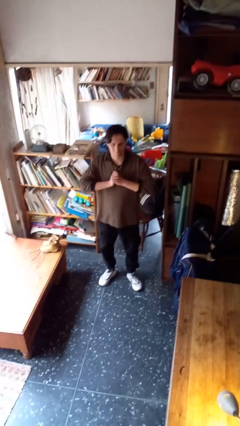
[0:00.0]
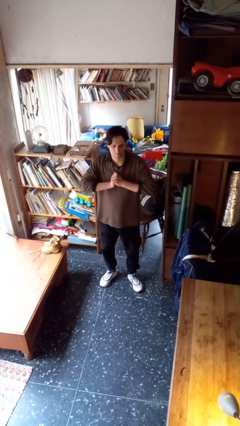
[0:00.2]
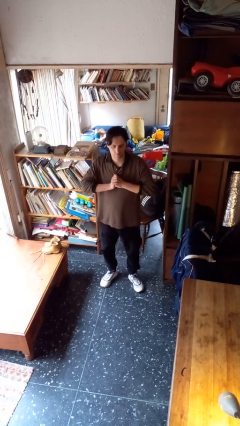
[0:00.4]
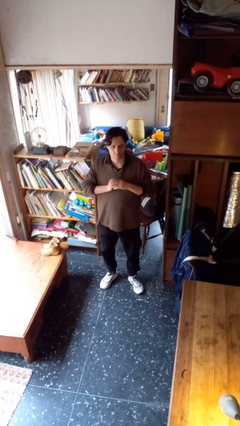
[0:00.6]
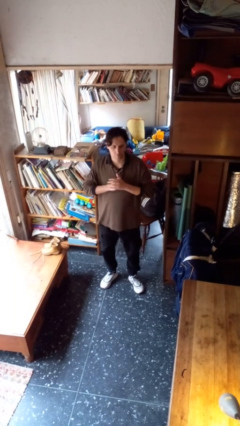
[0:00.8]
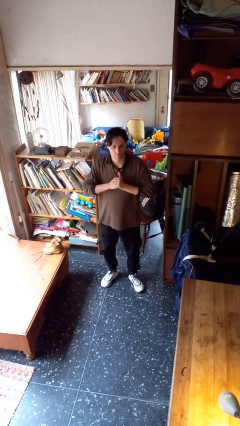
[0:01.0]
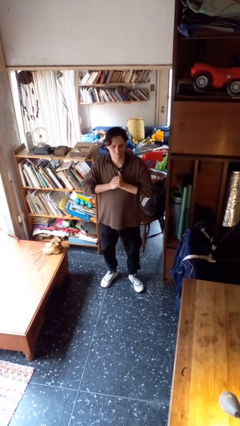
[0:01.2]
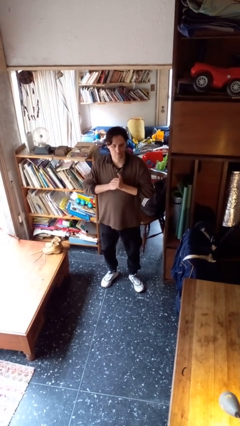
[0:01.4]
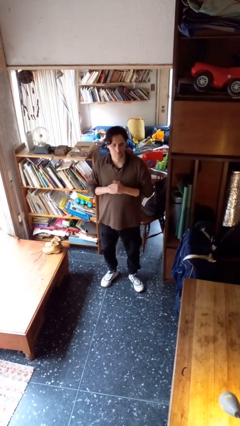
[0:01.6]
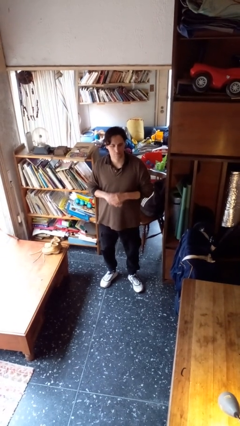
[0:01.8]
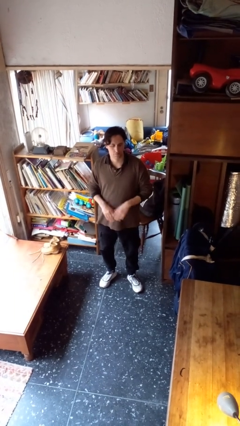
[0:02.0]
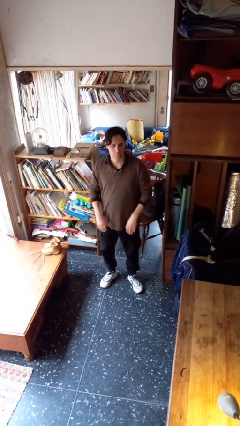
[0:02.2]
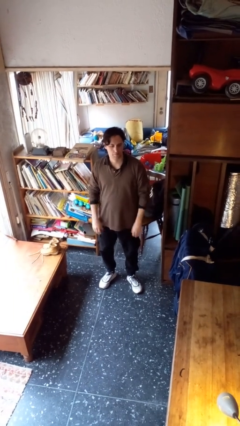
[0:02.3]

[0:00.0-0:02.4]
person cracks knuckles

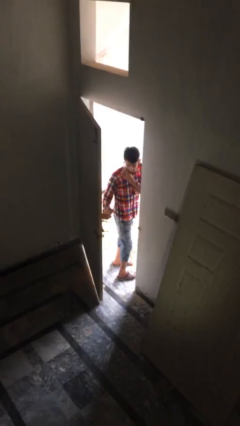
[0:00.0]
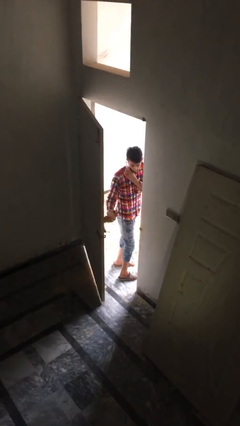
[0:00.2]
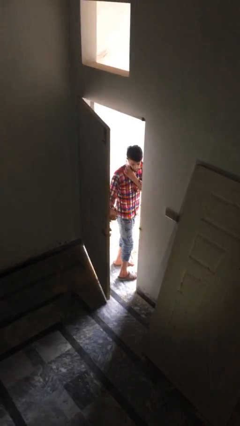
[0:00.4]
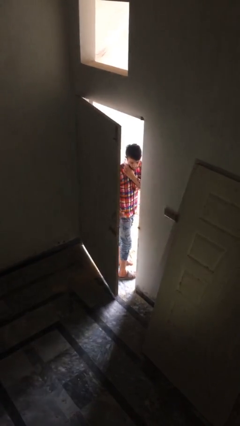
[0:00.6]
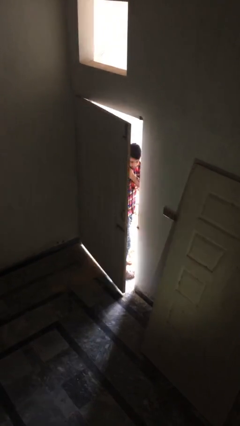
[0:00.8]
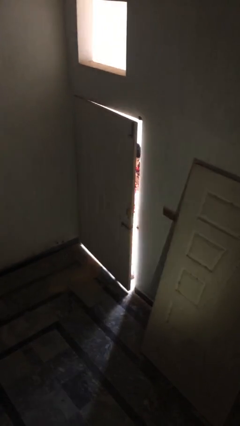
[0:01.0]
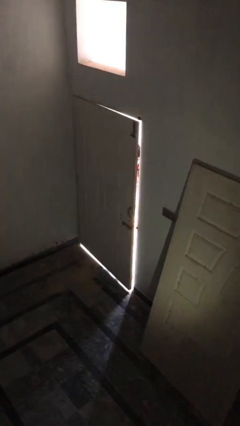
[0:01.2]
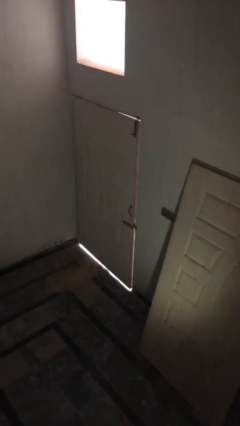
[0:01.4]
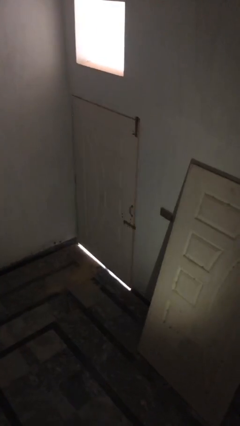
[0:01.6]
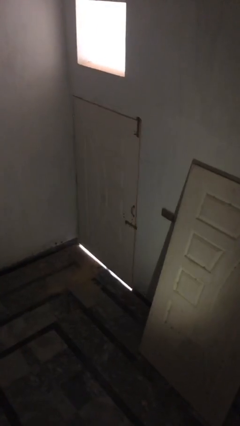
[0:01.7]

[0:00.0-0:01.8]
person closes facility door

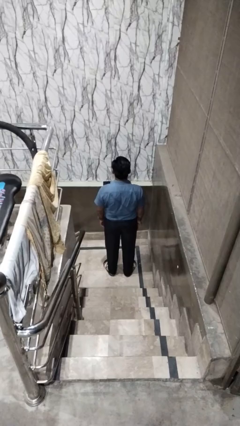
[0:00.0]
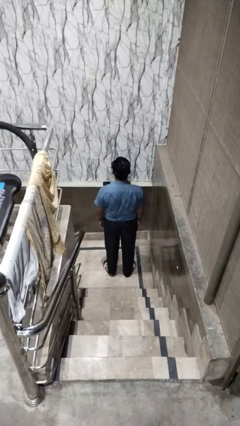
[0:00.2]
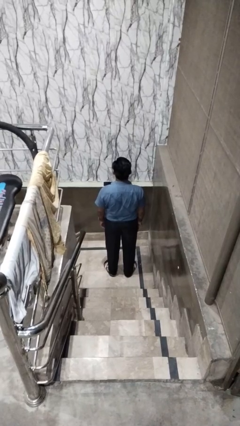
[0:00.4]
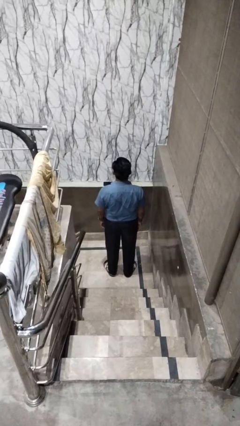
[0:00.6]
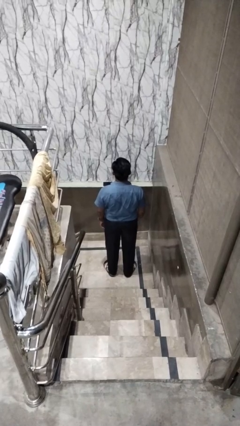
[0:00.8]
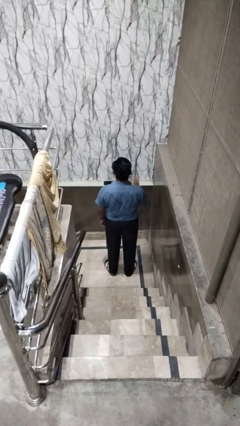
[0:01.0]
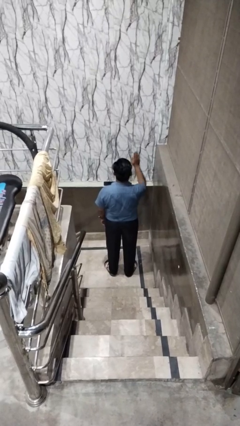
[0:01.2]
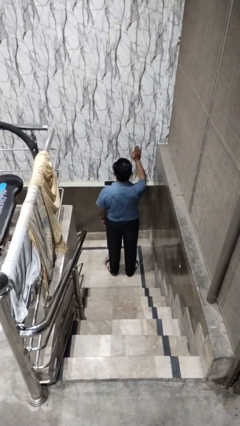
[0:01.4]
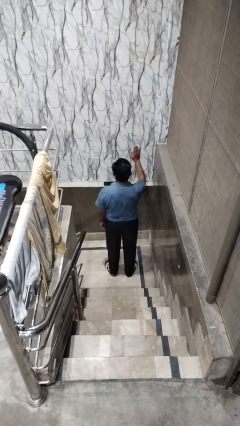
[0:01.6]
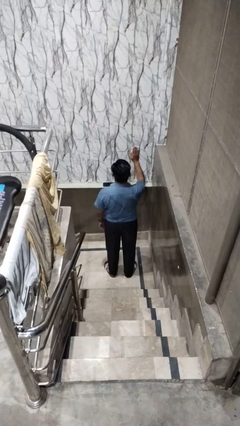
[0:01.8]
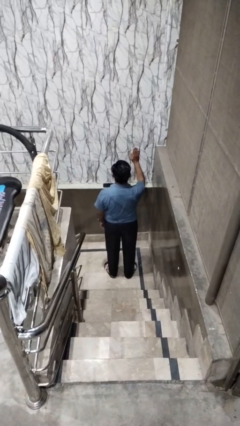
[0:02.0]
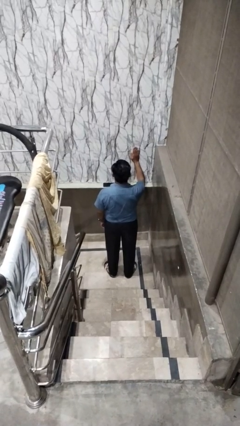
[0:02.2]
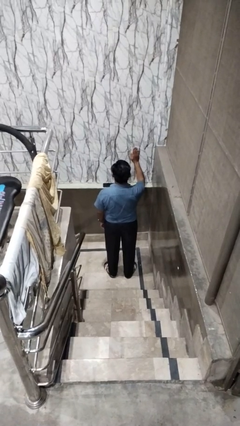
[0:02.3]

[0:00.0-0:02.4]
person gestures stop

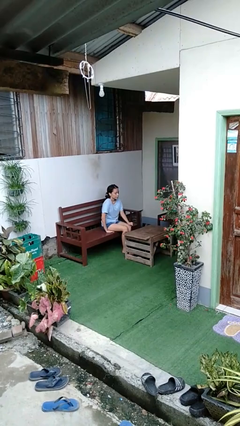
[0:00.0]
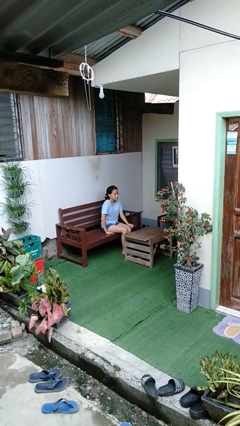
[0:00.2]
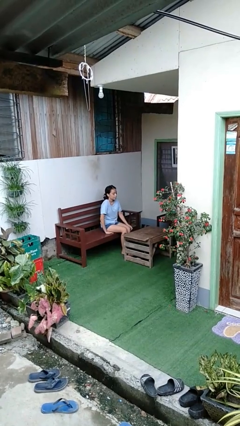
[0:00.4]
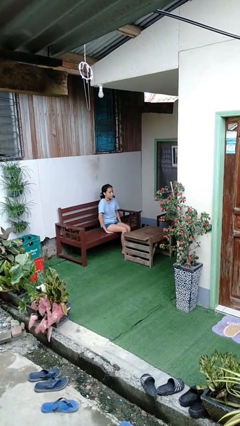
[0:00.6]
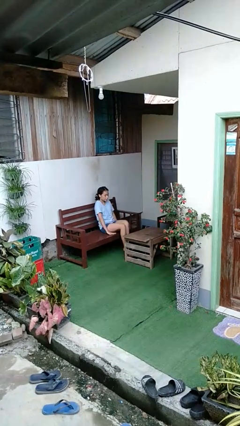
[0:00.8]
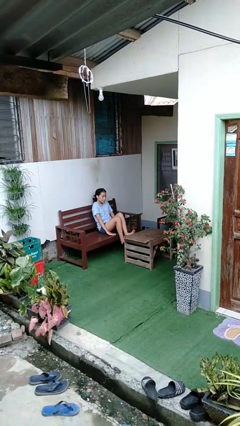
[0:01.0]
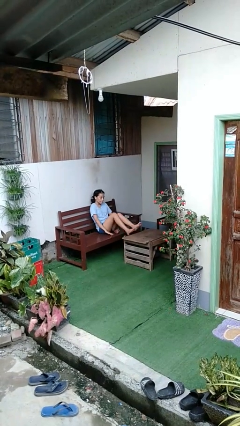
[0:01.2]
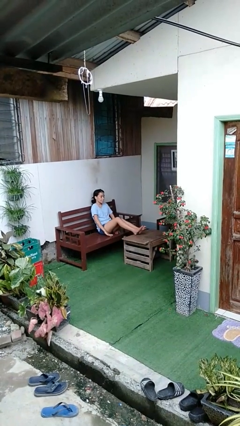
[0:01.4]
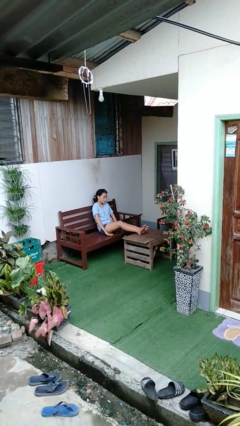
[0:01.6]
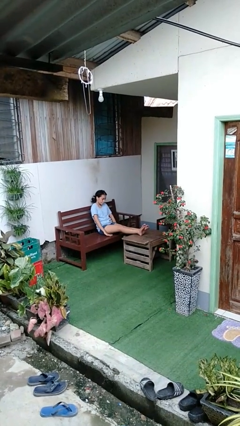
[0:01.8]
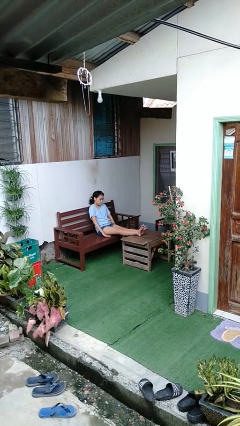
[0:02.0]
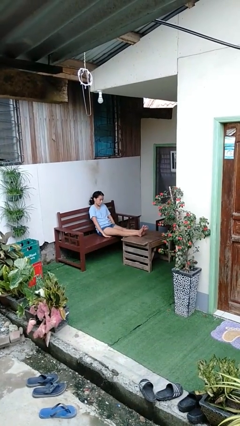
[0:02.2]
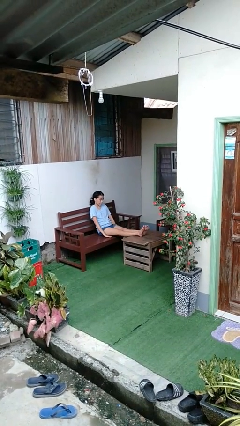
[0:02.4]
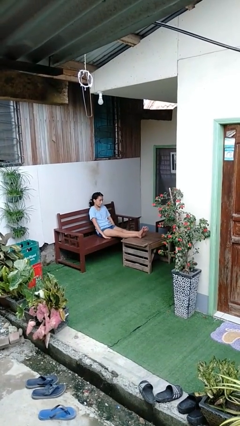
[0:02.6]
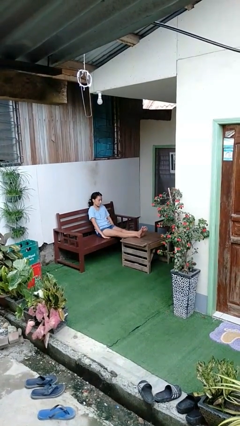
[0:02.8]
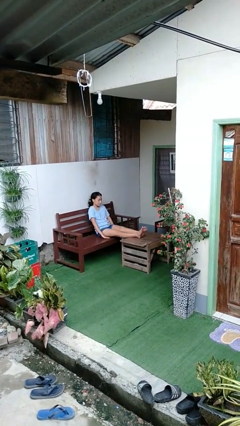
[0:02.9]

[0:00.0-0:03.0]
person puts feet up

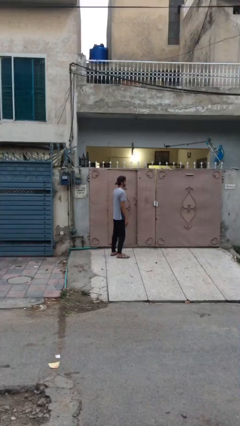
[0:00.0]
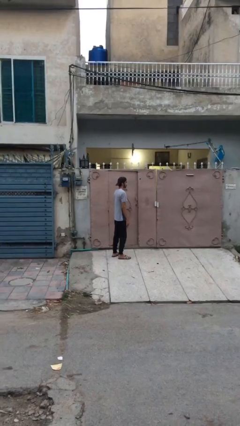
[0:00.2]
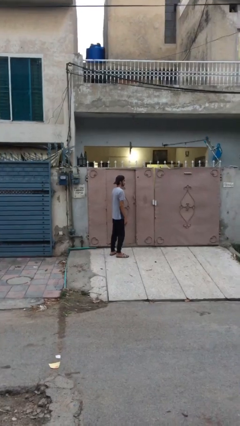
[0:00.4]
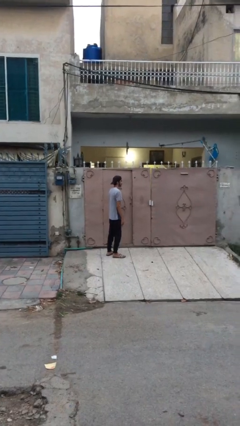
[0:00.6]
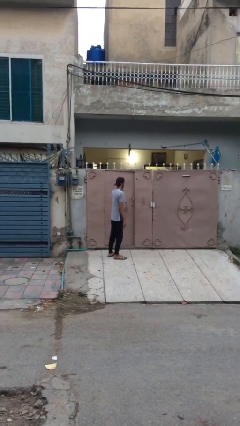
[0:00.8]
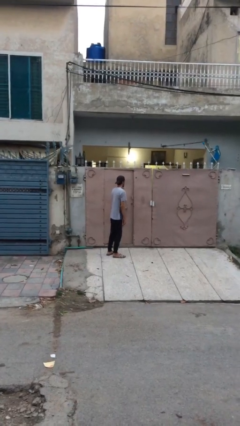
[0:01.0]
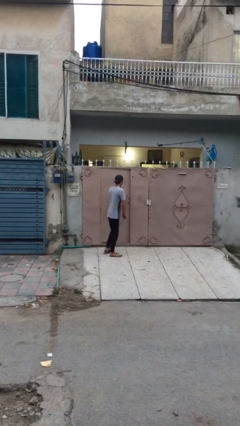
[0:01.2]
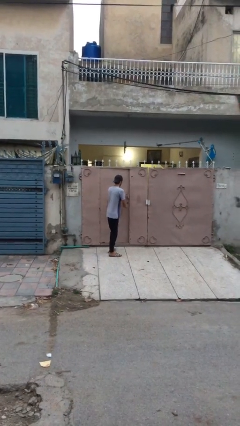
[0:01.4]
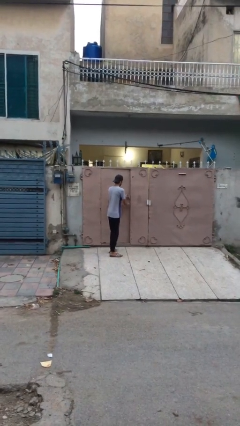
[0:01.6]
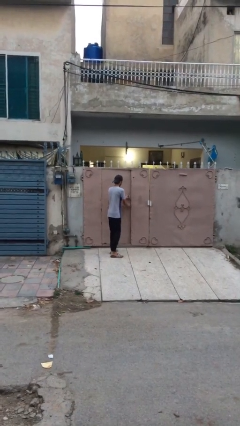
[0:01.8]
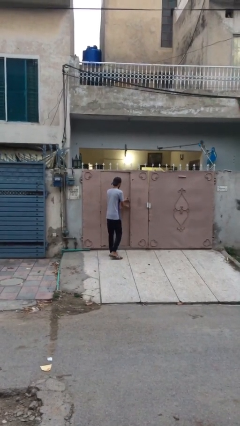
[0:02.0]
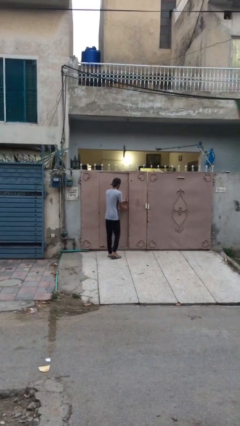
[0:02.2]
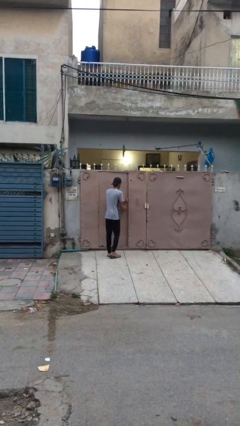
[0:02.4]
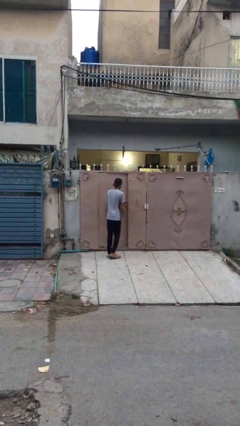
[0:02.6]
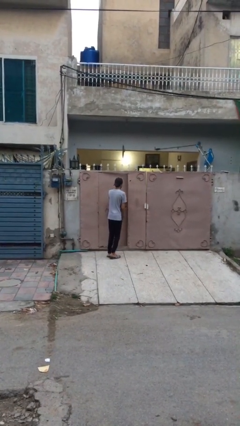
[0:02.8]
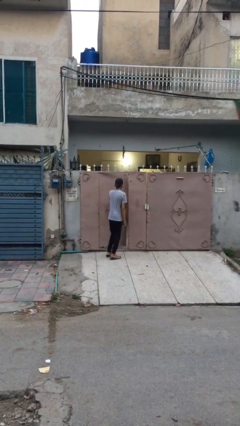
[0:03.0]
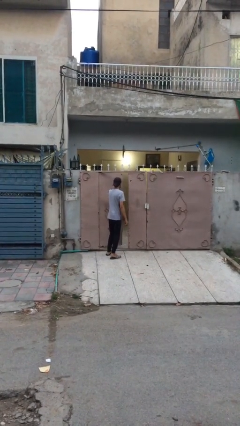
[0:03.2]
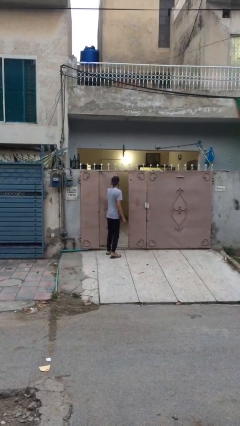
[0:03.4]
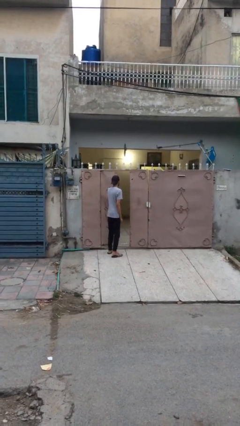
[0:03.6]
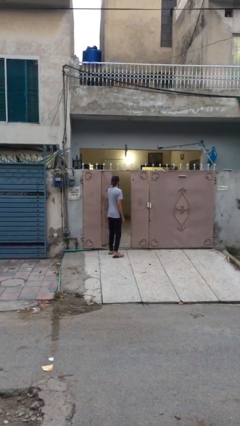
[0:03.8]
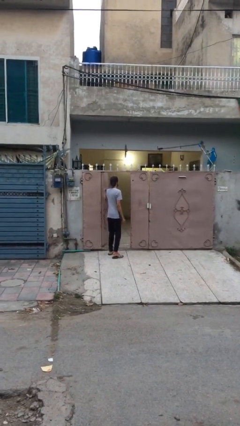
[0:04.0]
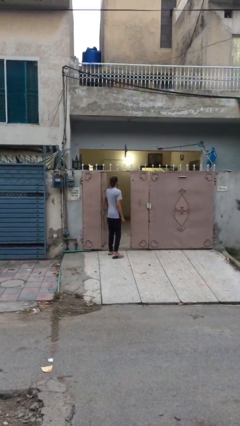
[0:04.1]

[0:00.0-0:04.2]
person opens facility door

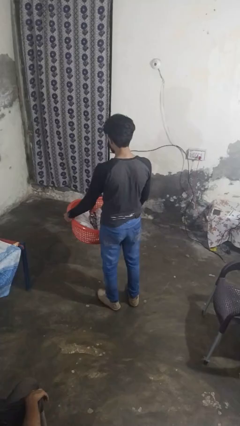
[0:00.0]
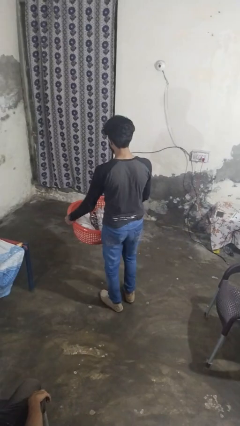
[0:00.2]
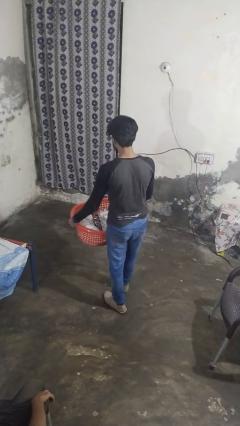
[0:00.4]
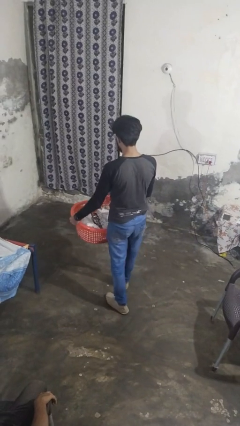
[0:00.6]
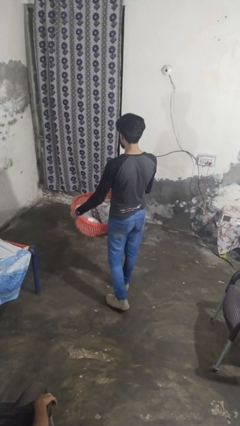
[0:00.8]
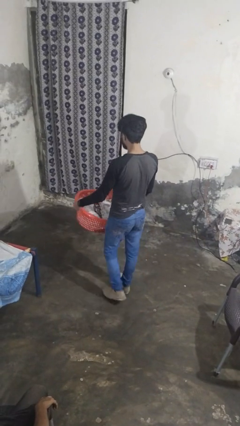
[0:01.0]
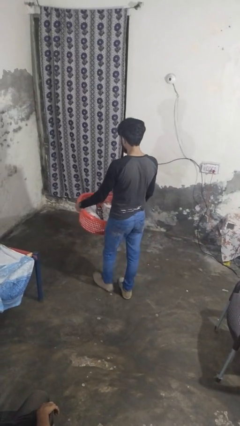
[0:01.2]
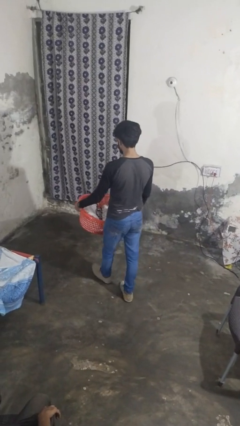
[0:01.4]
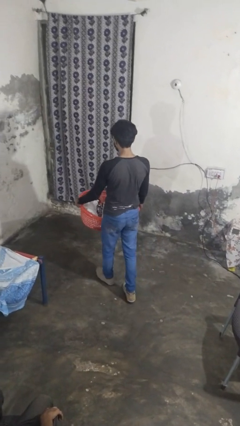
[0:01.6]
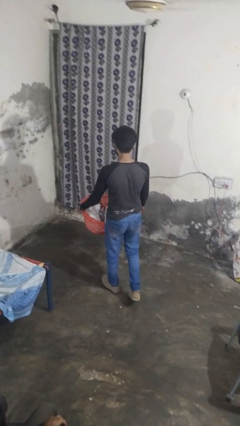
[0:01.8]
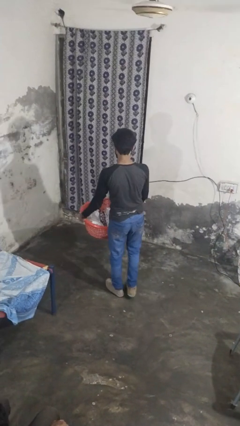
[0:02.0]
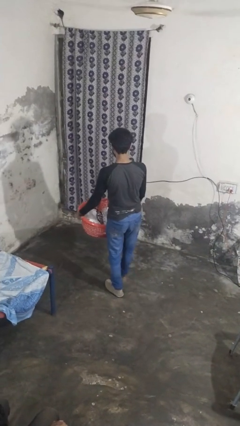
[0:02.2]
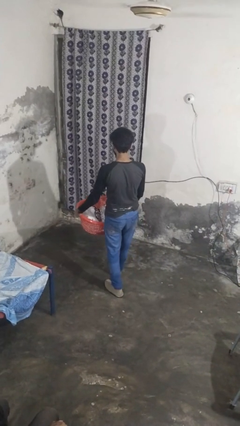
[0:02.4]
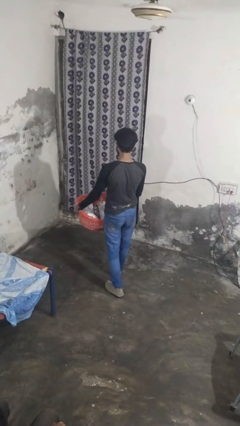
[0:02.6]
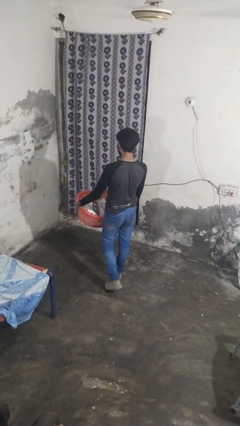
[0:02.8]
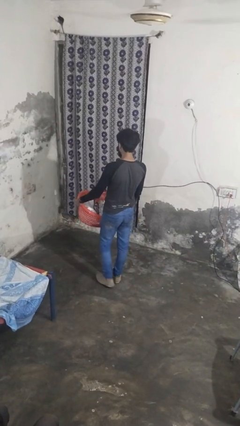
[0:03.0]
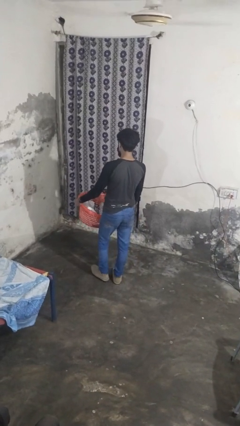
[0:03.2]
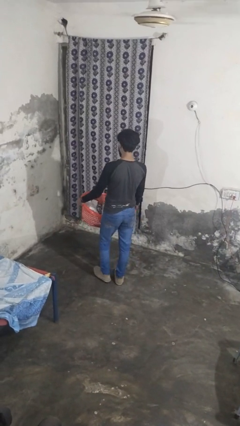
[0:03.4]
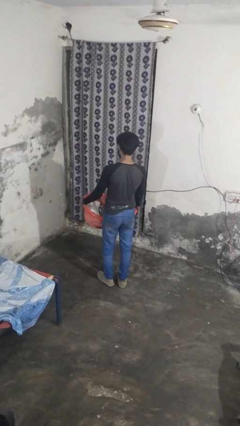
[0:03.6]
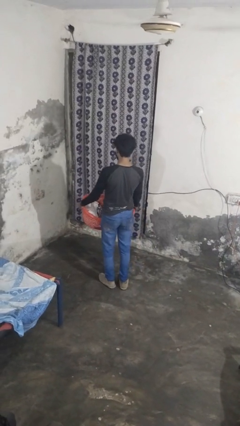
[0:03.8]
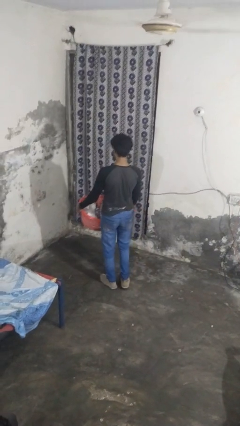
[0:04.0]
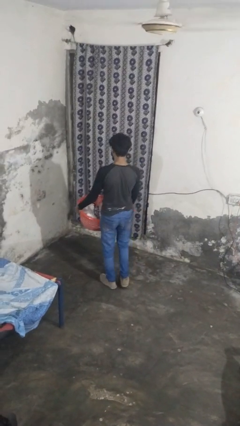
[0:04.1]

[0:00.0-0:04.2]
person carries laundry basket
